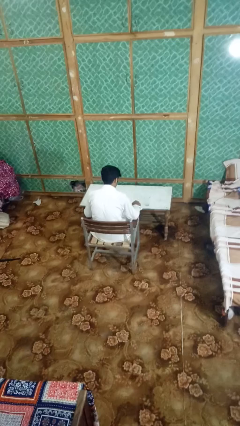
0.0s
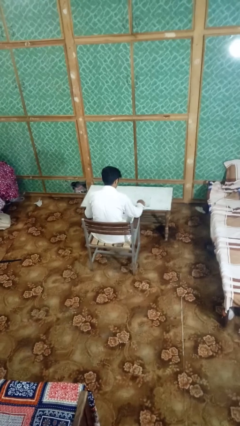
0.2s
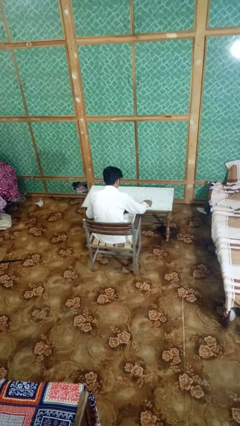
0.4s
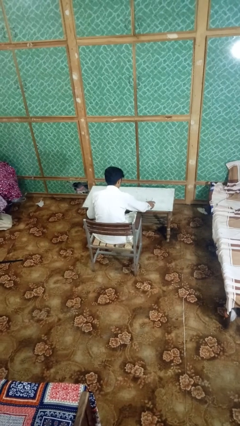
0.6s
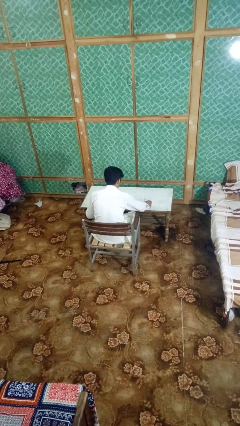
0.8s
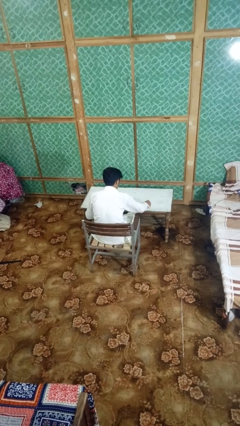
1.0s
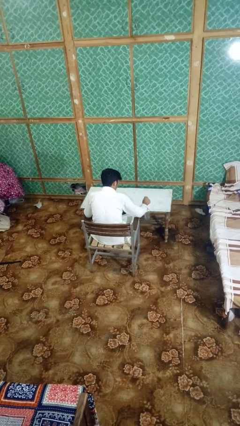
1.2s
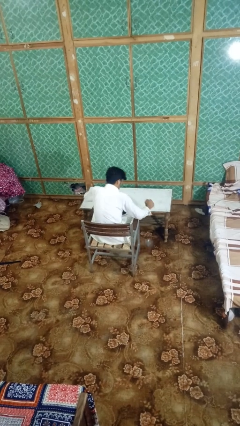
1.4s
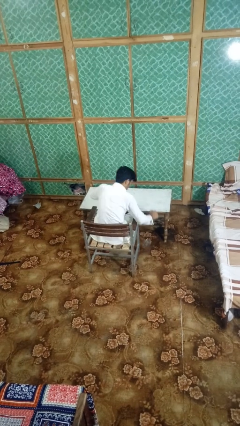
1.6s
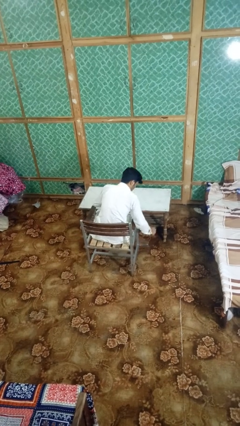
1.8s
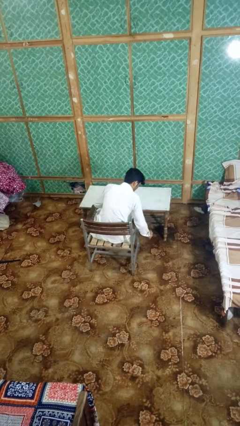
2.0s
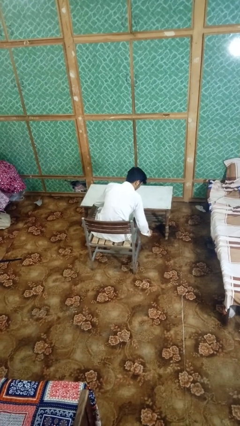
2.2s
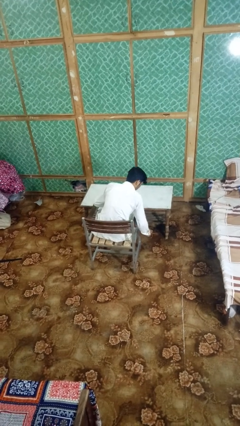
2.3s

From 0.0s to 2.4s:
person knocks over glass

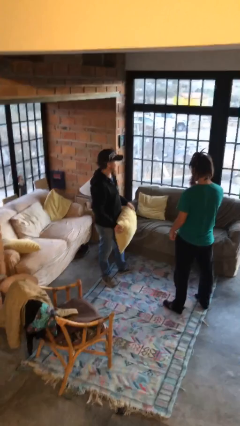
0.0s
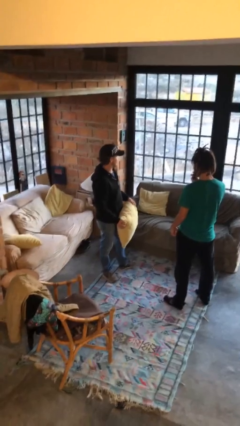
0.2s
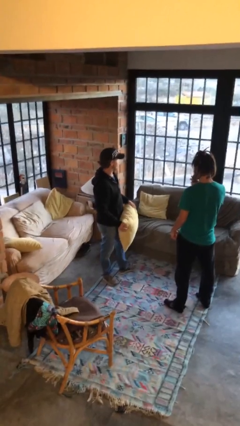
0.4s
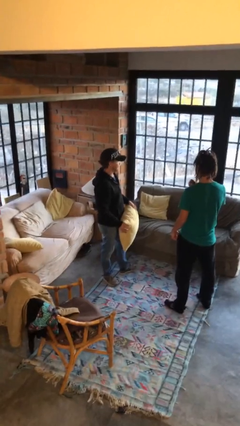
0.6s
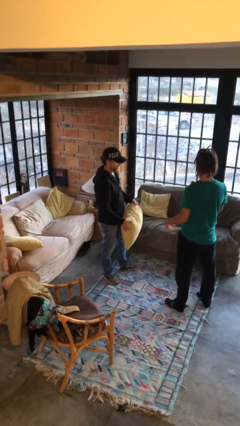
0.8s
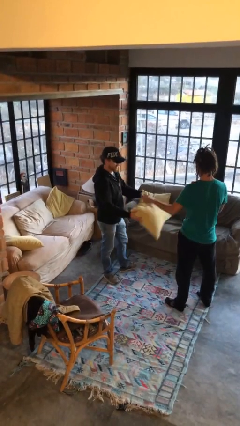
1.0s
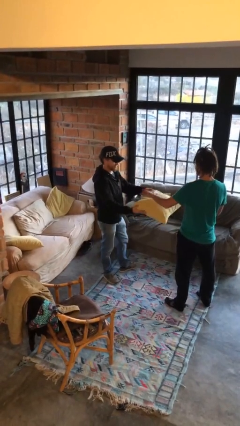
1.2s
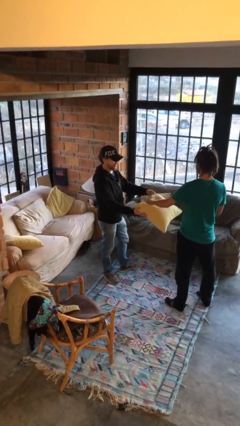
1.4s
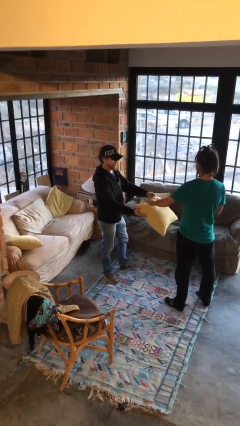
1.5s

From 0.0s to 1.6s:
person transfers object to person

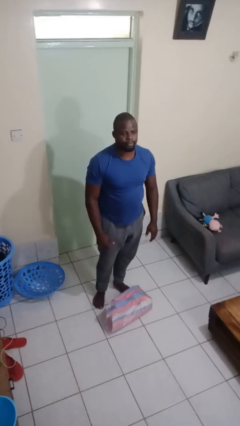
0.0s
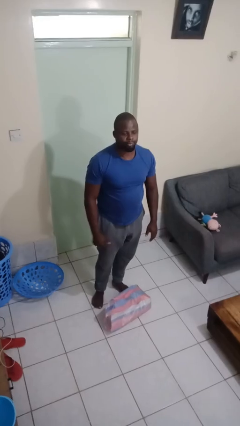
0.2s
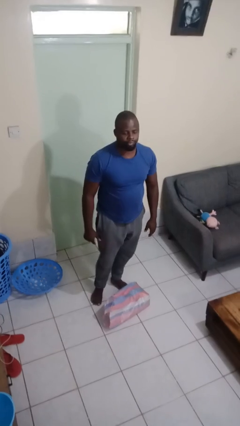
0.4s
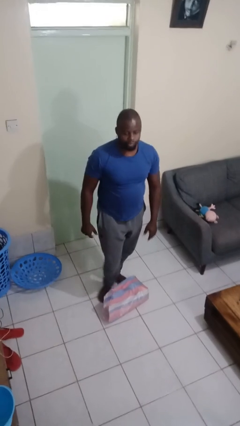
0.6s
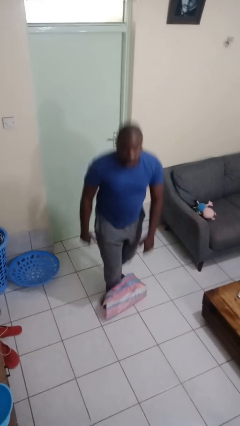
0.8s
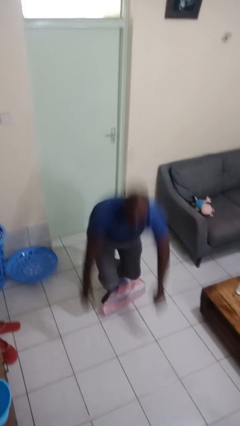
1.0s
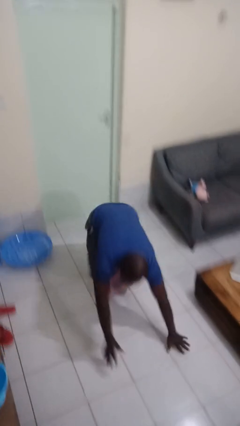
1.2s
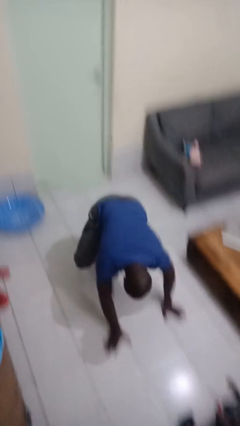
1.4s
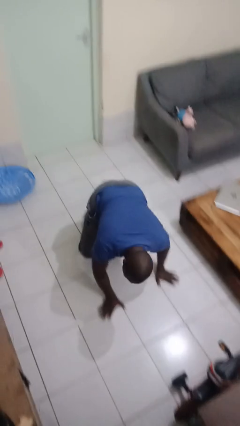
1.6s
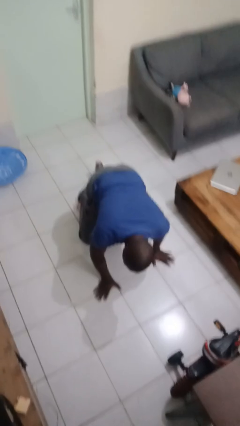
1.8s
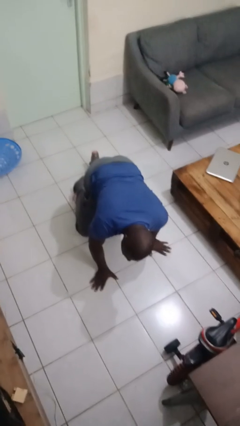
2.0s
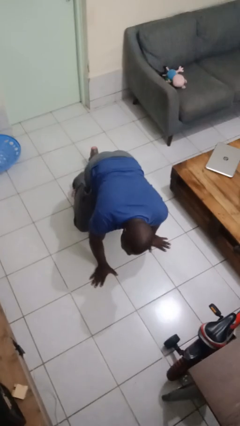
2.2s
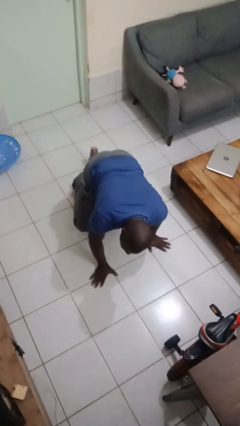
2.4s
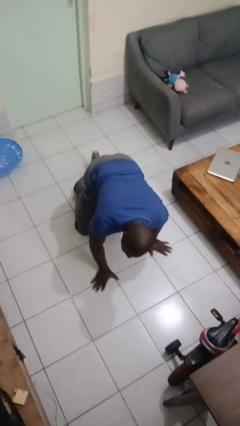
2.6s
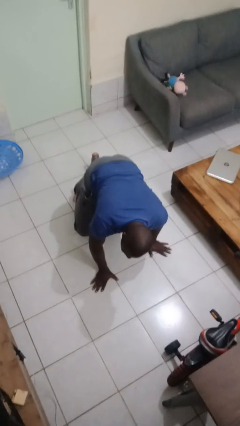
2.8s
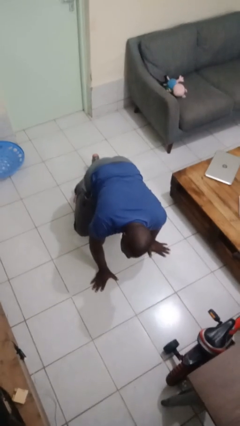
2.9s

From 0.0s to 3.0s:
person trips on object on floor

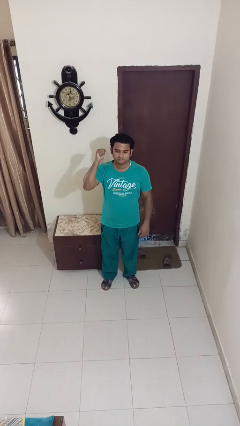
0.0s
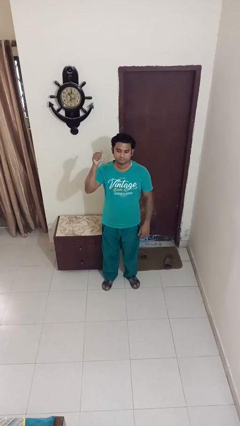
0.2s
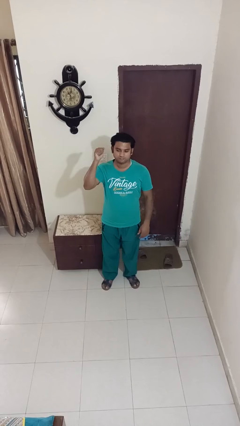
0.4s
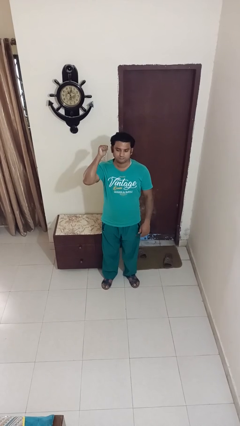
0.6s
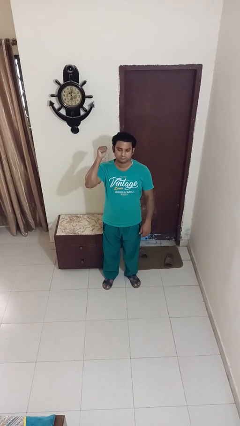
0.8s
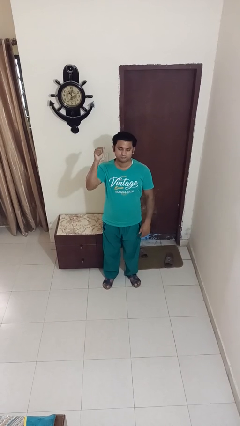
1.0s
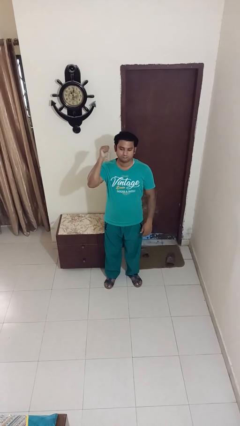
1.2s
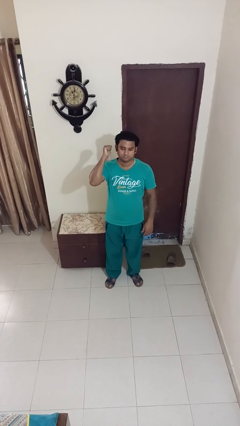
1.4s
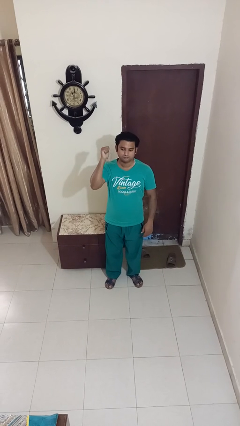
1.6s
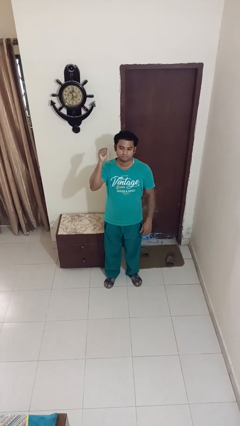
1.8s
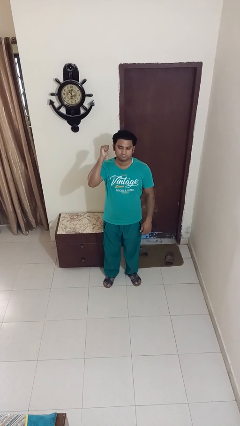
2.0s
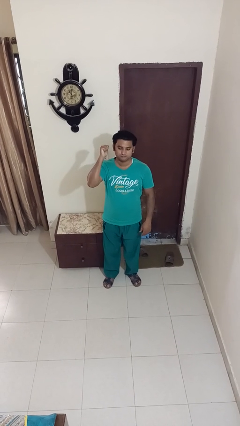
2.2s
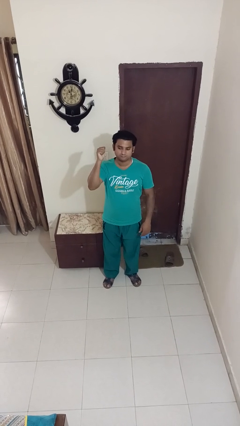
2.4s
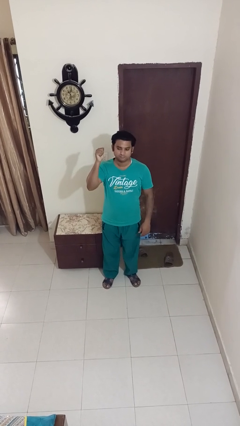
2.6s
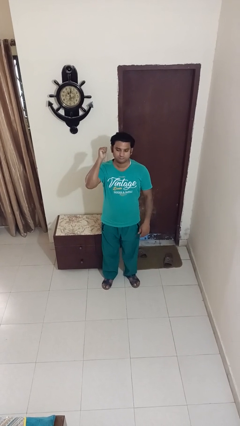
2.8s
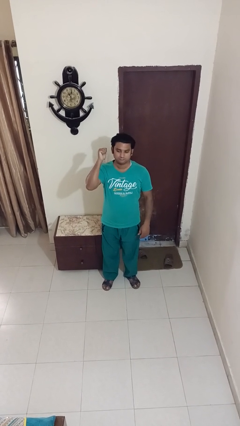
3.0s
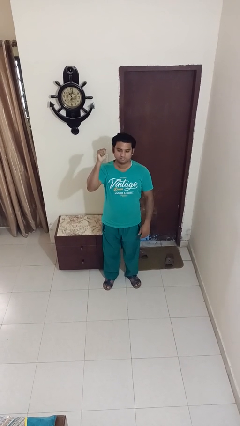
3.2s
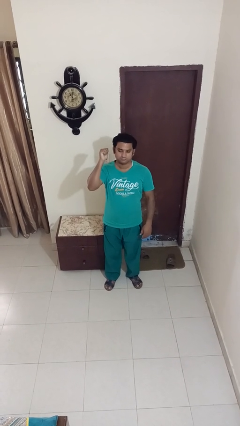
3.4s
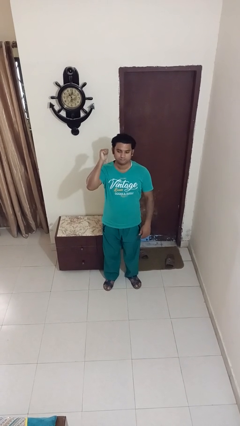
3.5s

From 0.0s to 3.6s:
person gestures behind me

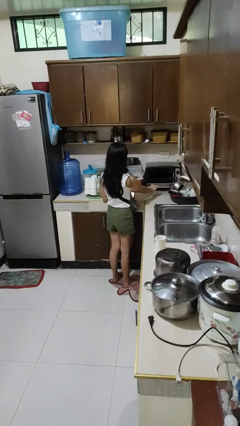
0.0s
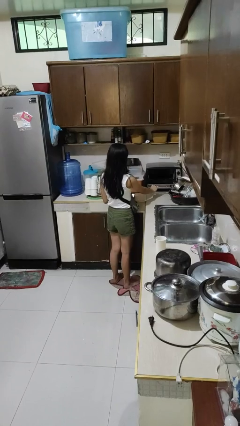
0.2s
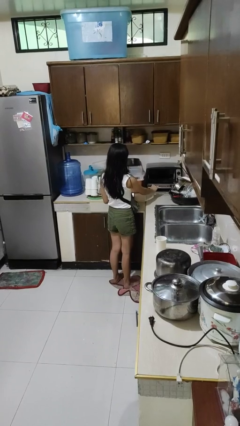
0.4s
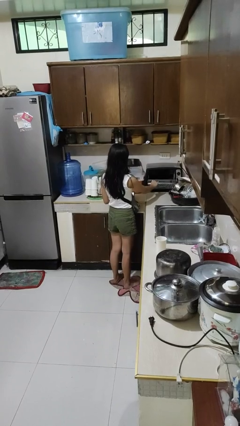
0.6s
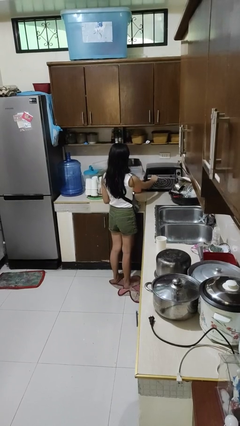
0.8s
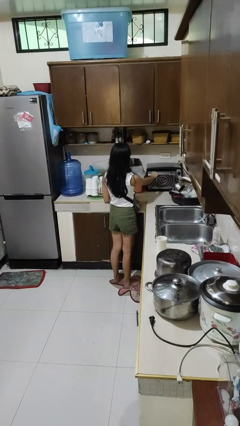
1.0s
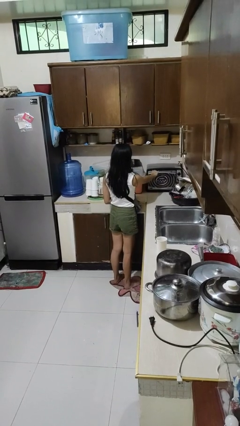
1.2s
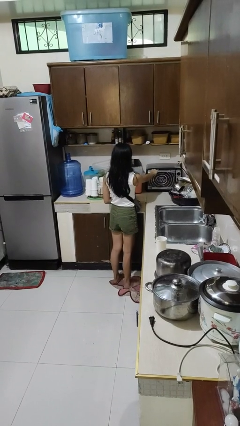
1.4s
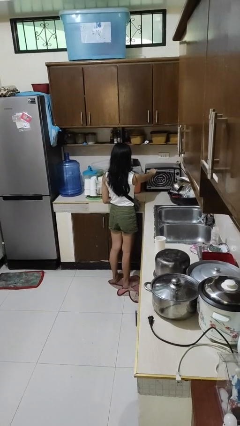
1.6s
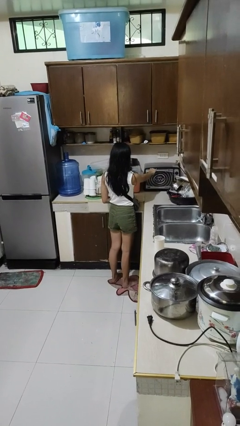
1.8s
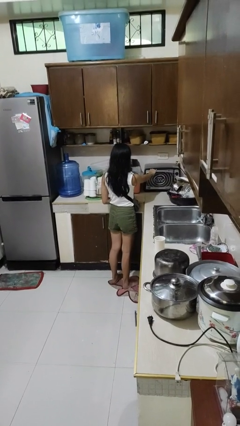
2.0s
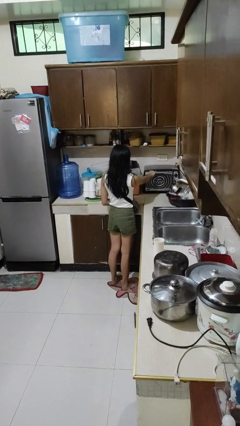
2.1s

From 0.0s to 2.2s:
person closes microwave

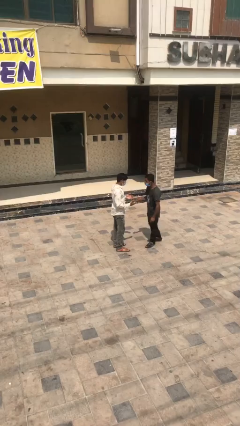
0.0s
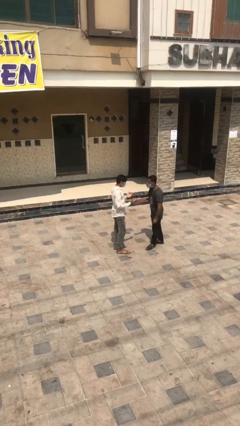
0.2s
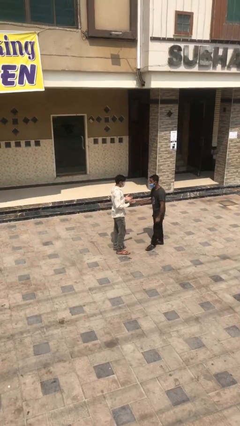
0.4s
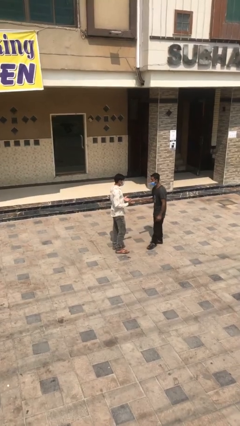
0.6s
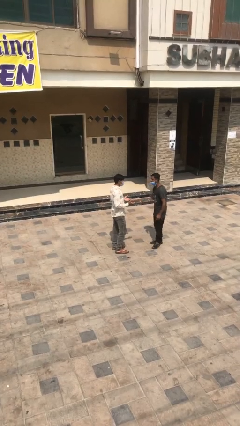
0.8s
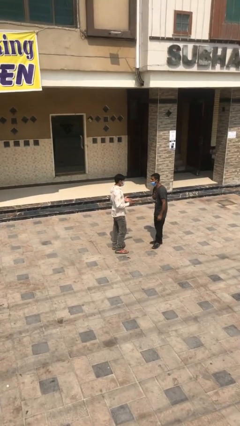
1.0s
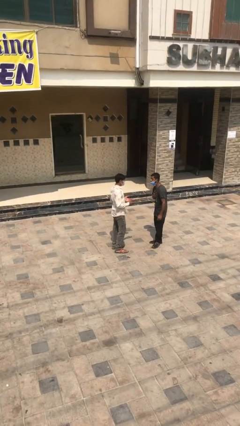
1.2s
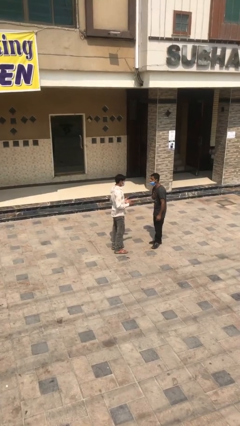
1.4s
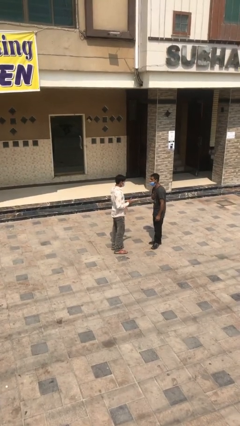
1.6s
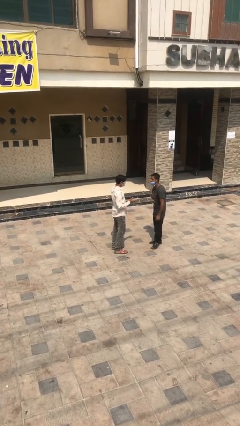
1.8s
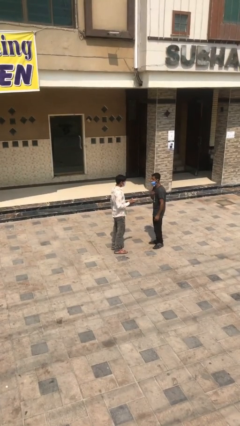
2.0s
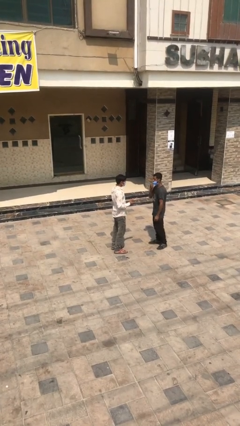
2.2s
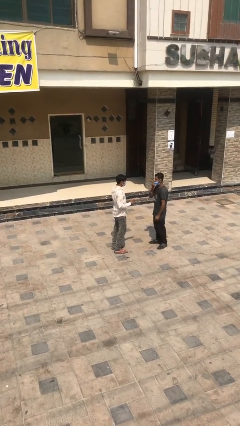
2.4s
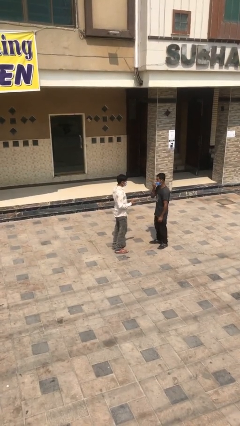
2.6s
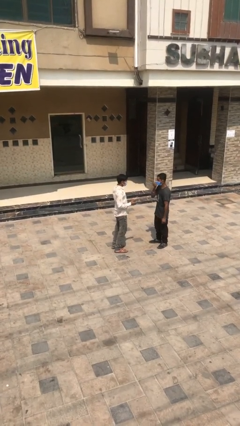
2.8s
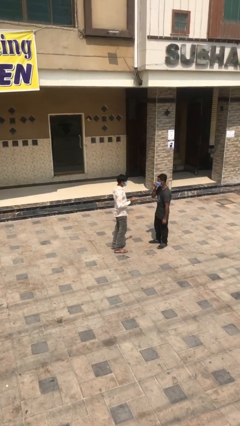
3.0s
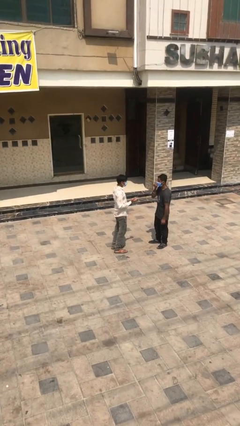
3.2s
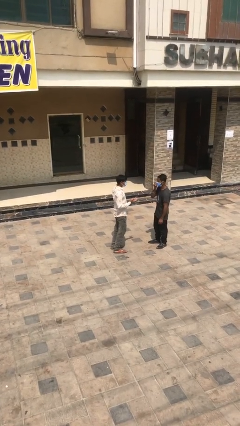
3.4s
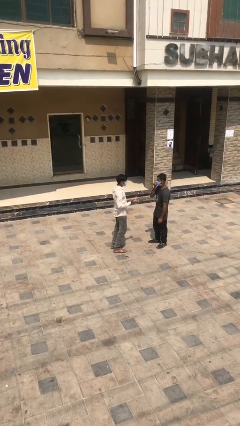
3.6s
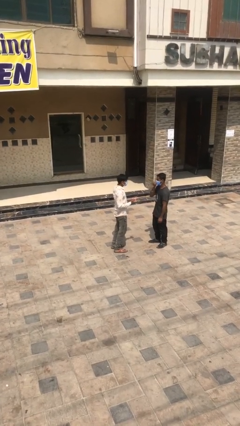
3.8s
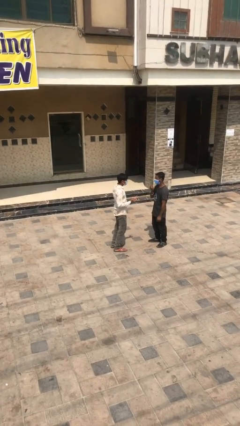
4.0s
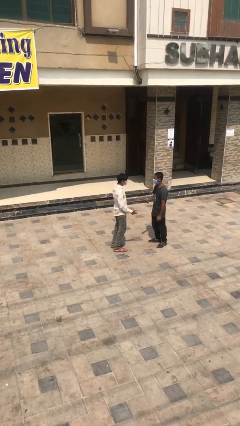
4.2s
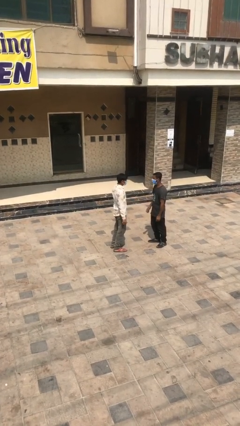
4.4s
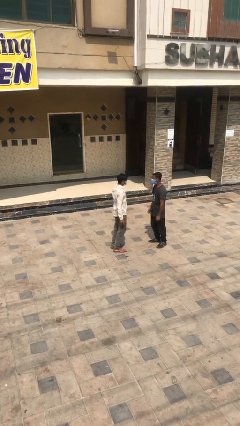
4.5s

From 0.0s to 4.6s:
person talks to person

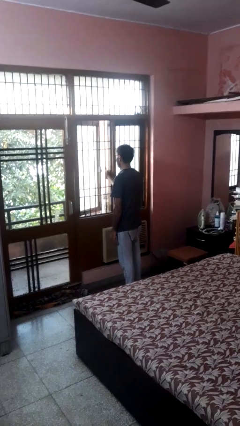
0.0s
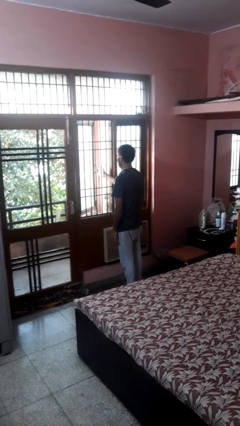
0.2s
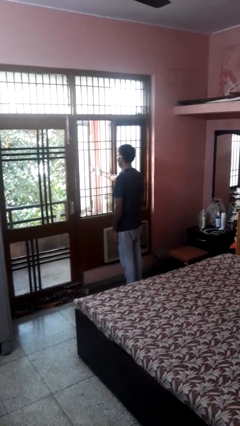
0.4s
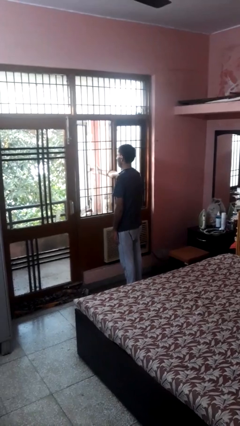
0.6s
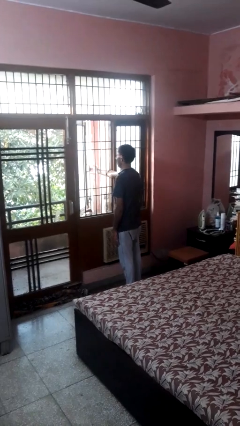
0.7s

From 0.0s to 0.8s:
person opens home window
